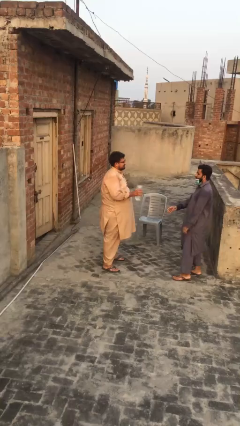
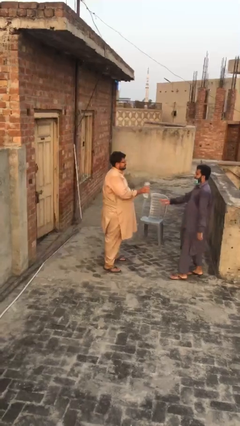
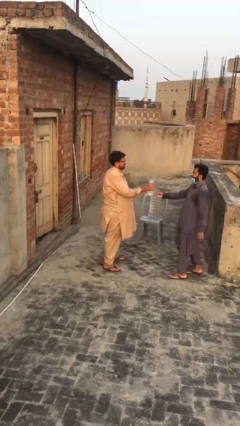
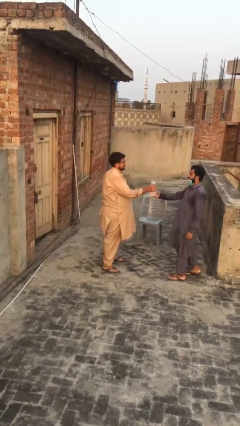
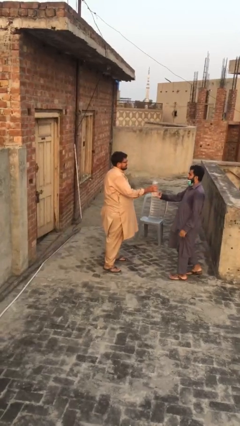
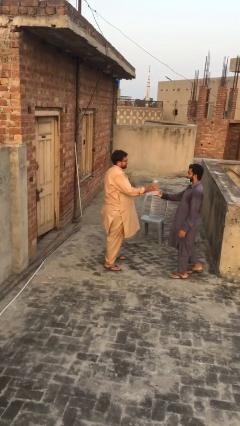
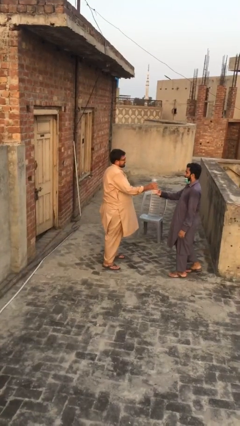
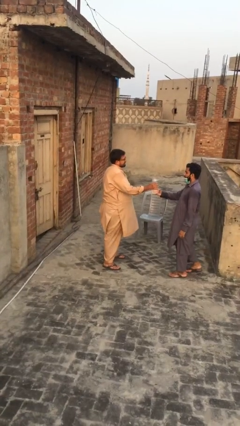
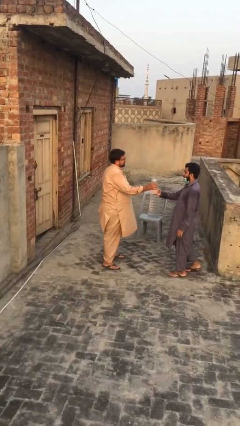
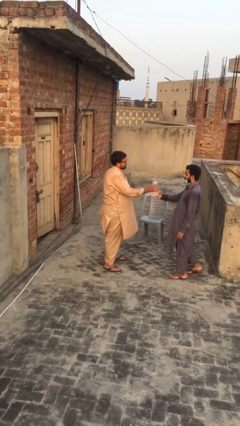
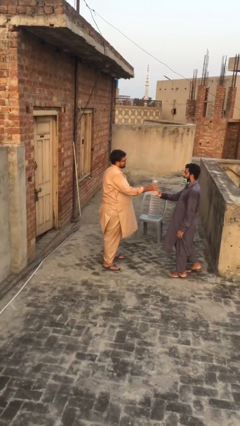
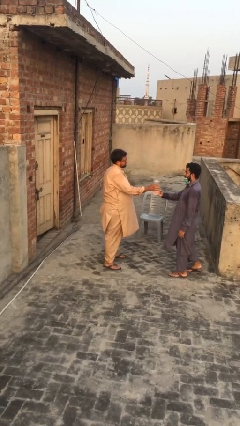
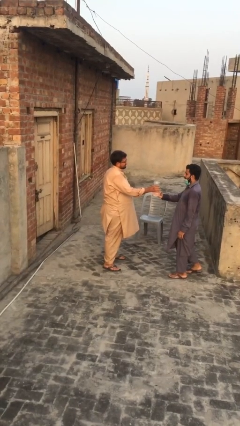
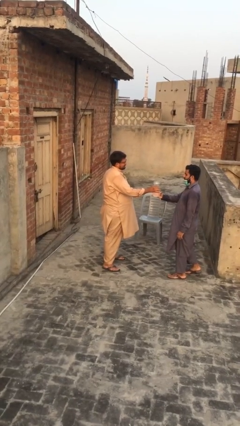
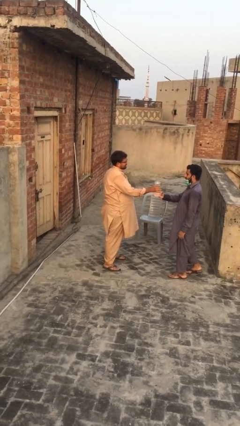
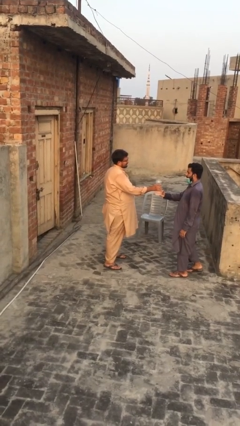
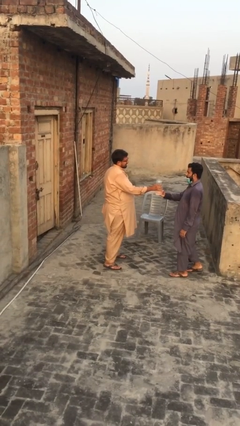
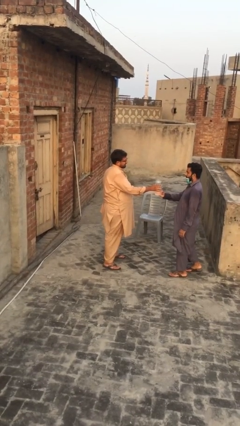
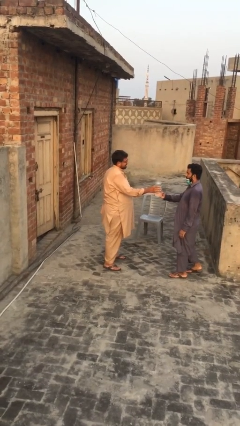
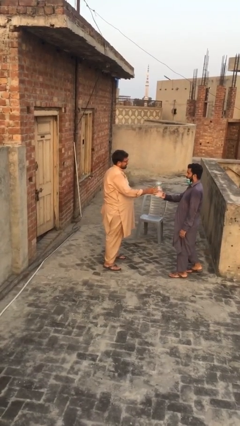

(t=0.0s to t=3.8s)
person transfers object to person

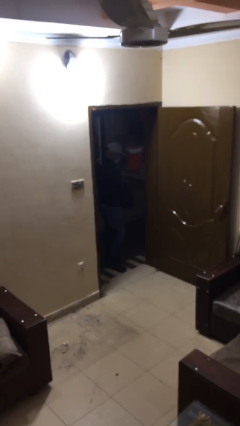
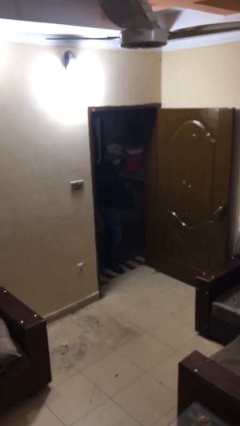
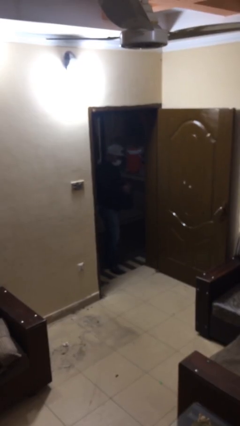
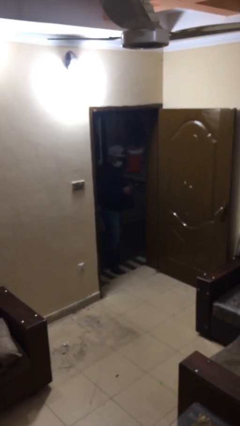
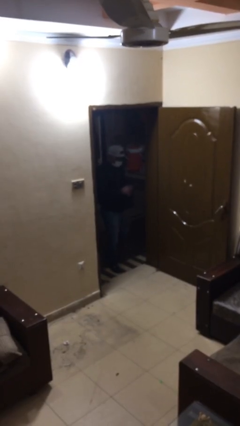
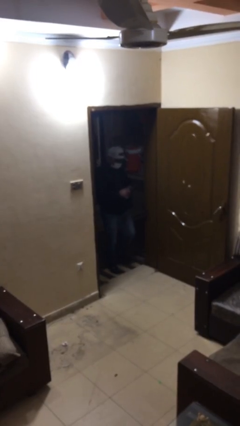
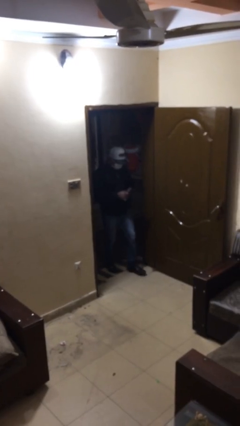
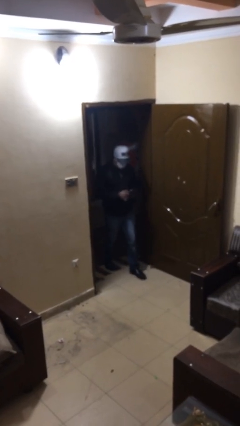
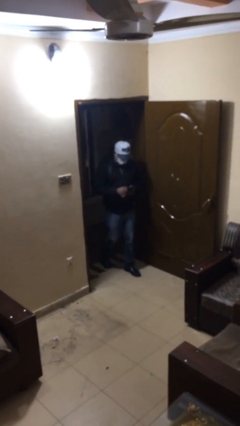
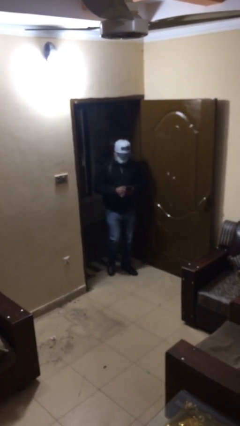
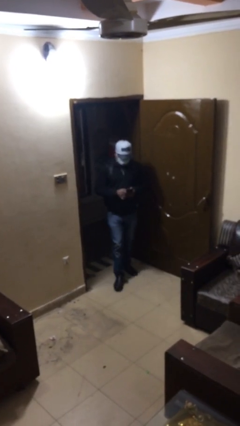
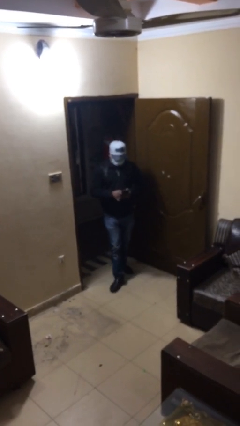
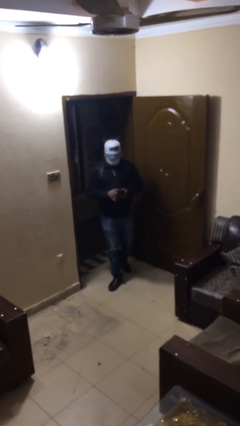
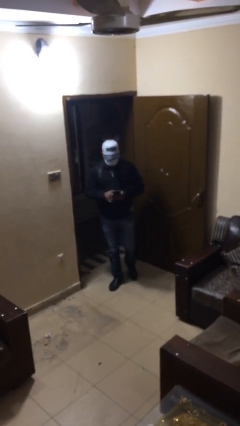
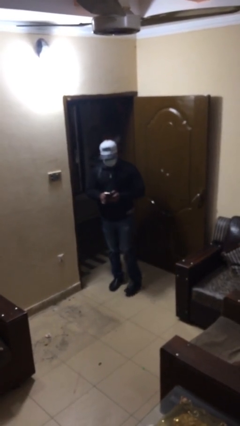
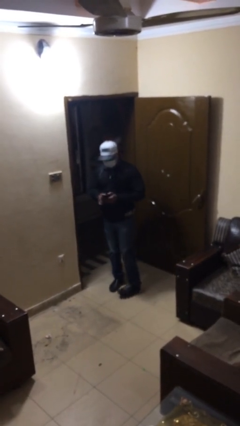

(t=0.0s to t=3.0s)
person enters scene through structure

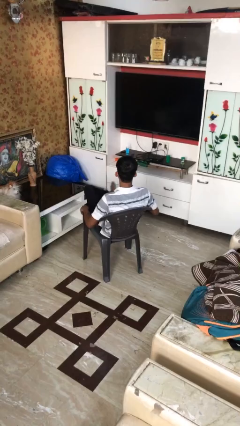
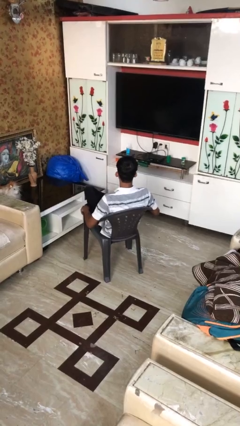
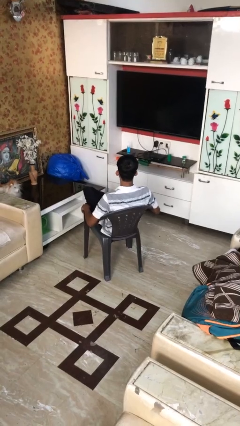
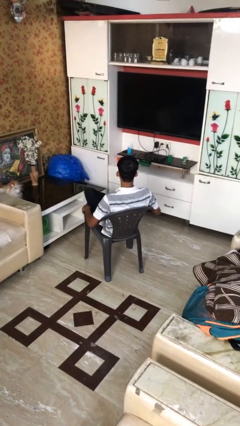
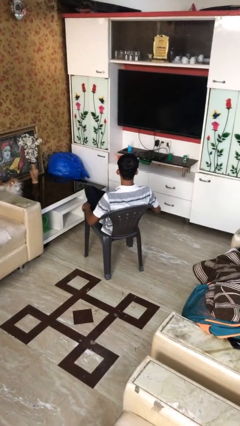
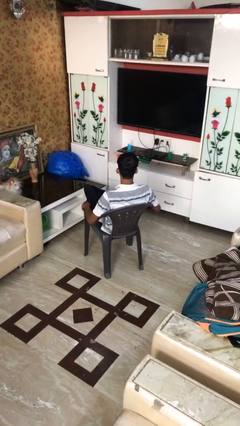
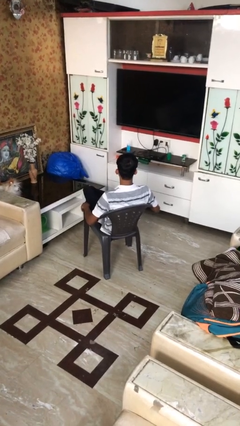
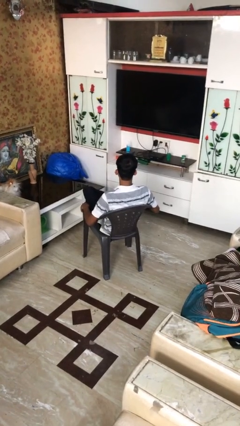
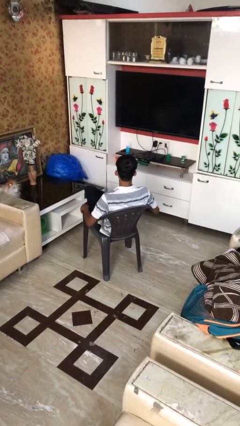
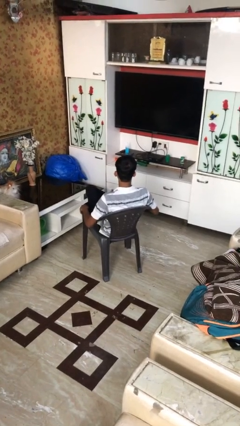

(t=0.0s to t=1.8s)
person crosses legs

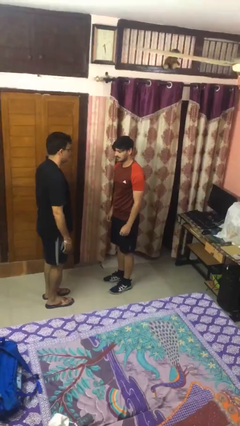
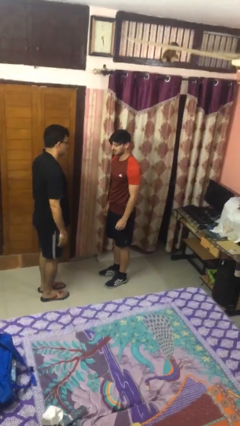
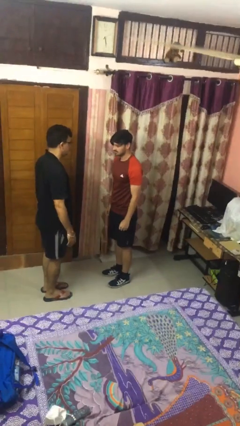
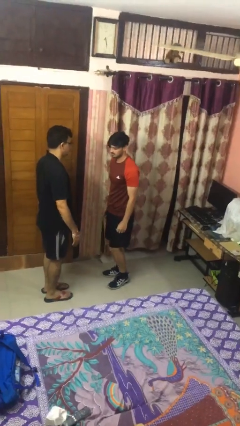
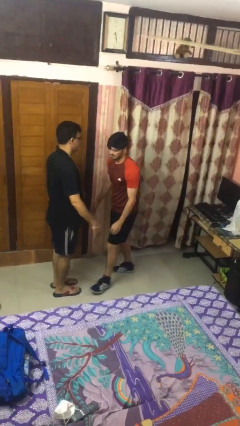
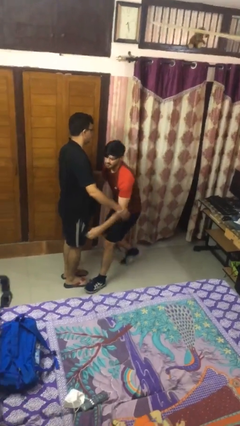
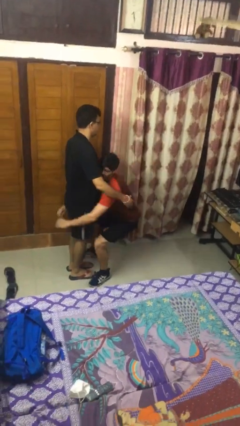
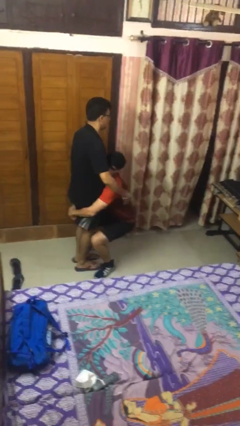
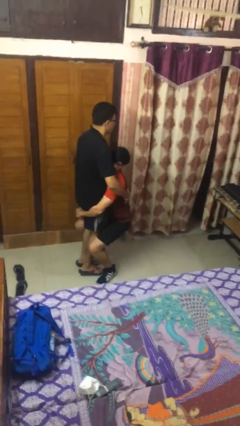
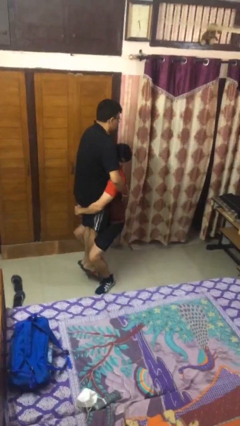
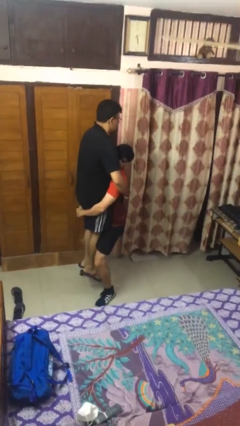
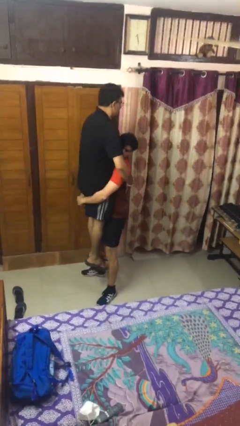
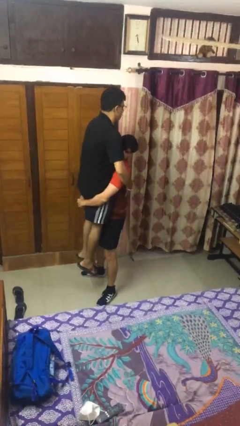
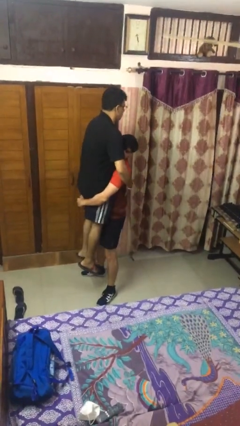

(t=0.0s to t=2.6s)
person picks up person

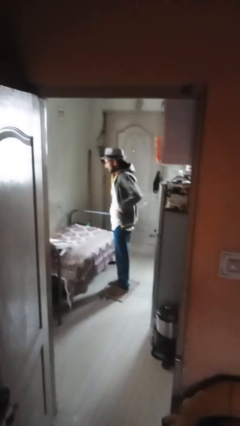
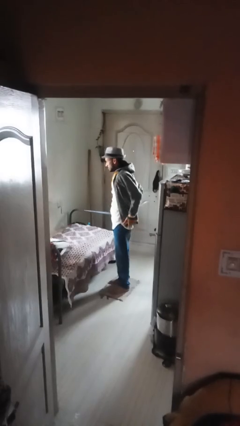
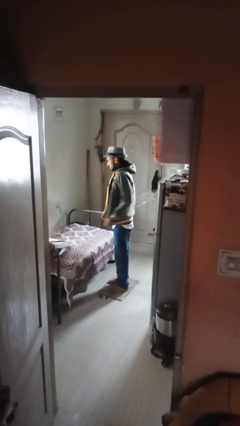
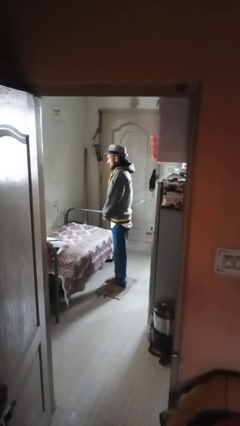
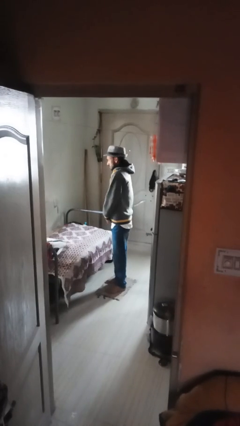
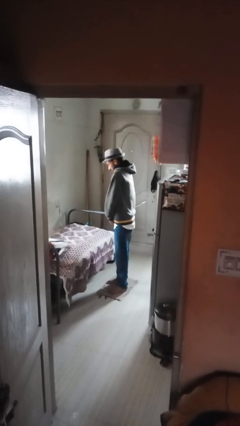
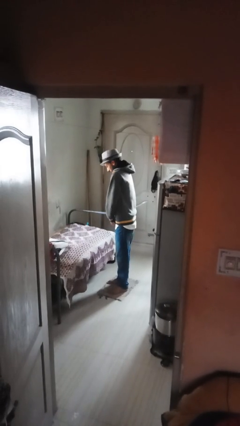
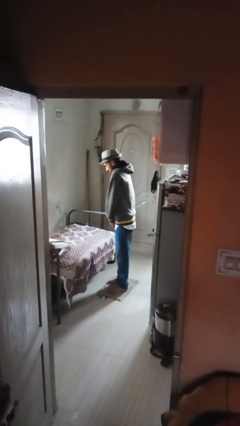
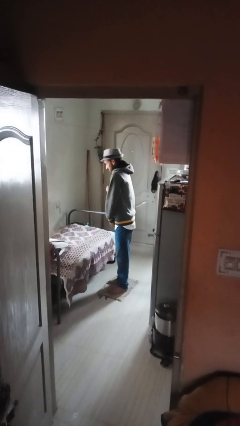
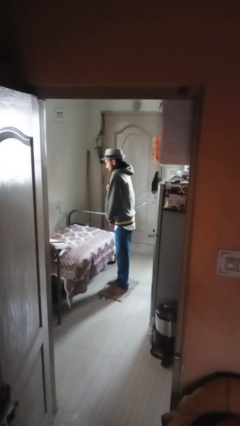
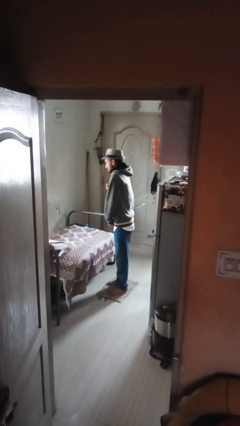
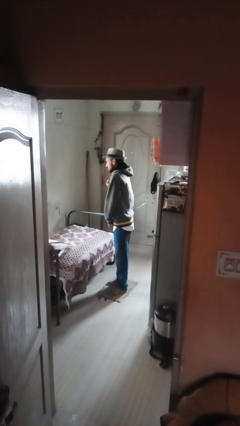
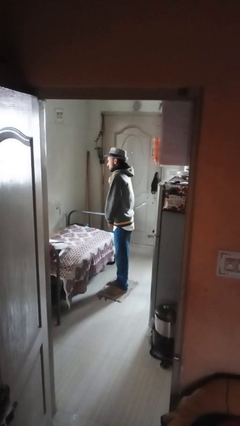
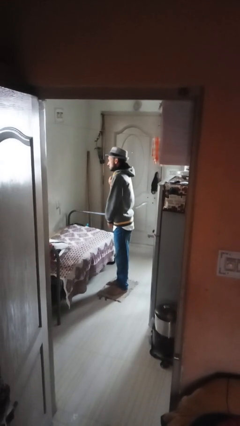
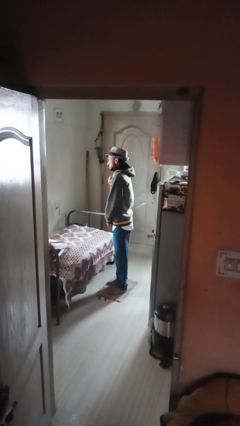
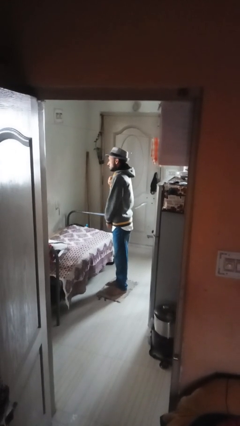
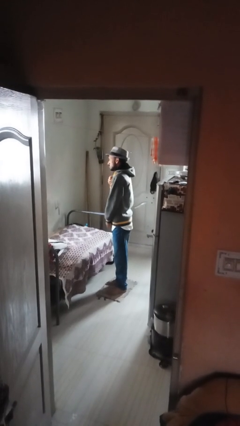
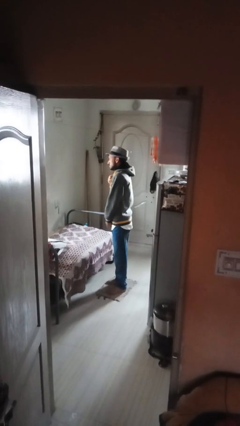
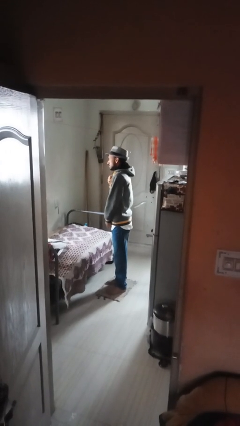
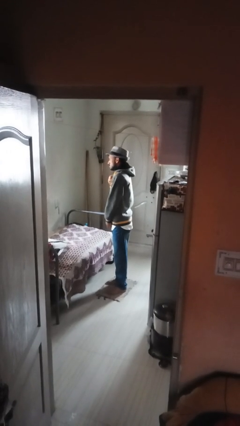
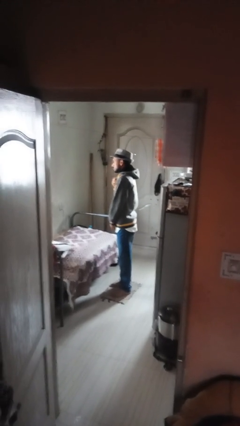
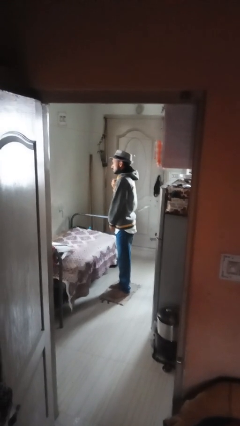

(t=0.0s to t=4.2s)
person zips up jacket

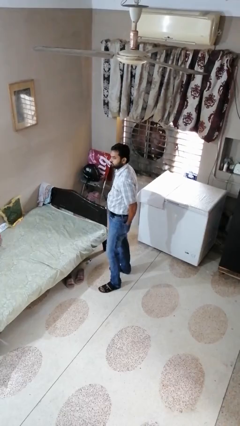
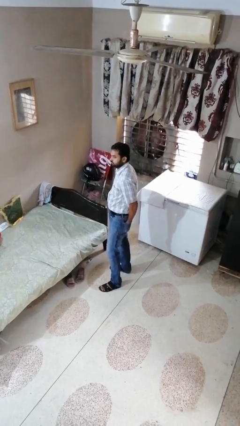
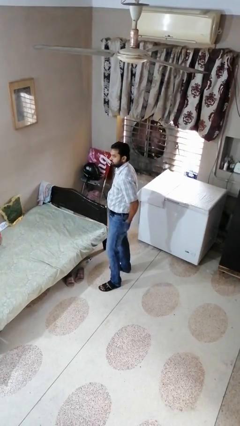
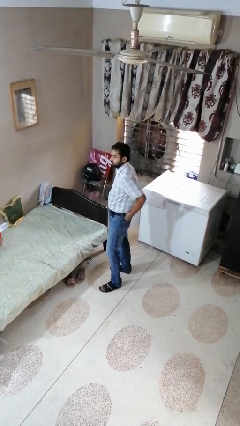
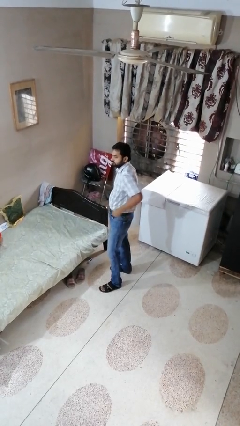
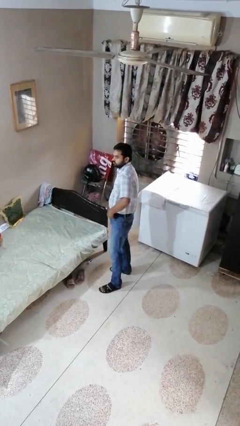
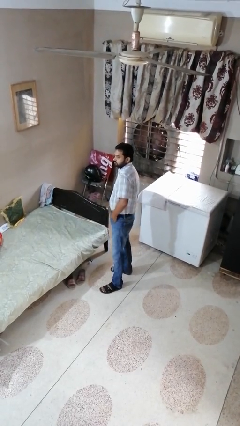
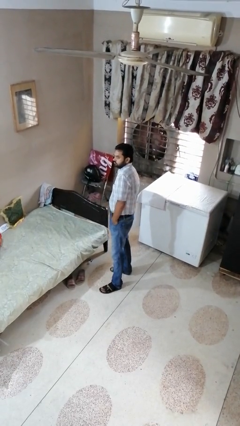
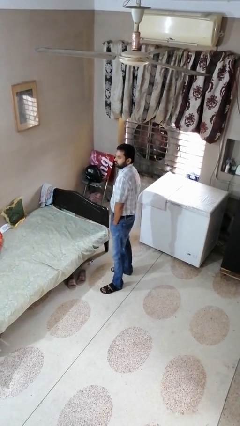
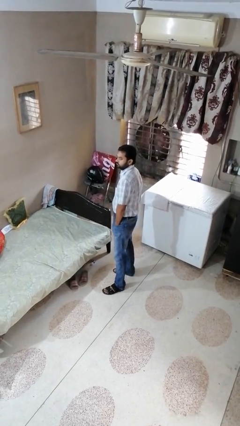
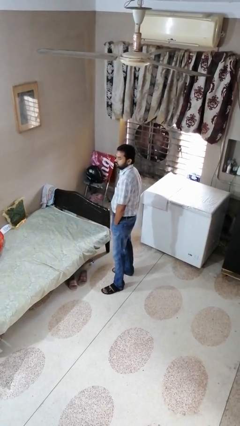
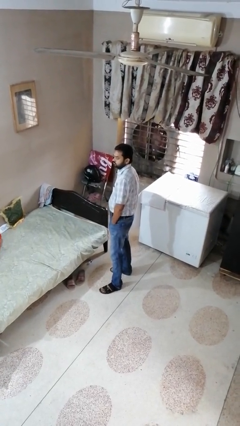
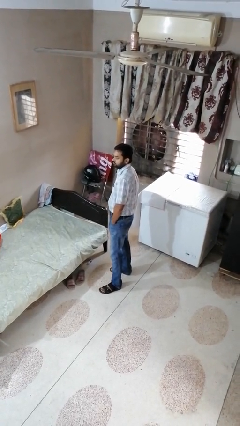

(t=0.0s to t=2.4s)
person puts hands in back pockets
